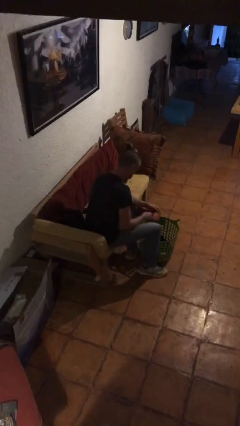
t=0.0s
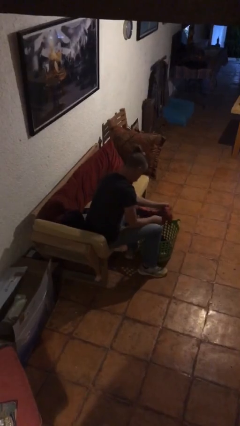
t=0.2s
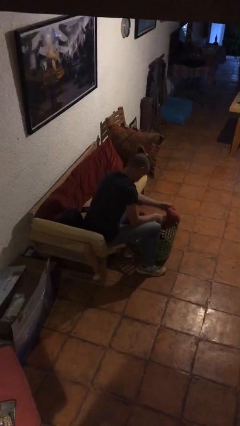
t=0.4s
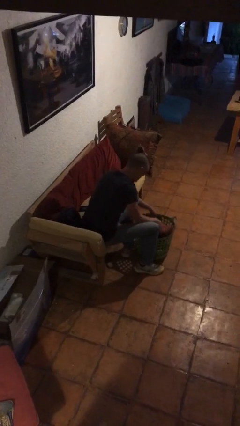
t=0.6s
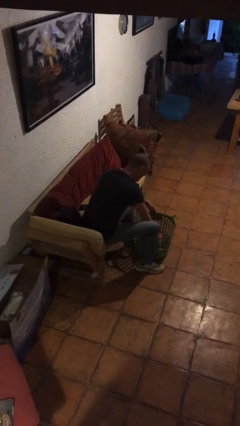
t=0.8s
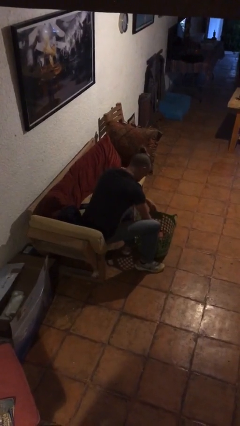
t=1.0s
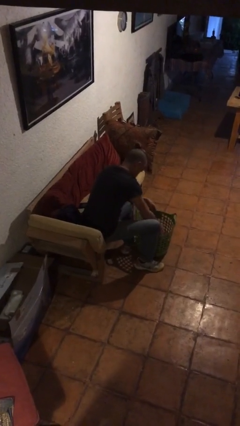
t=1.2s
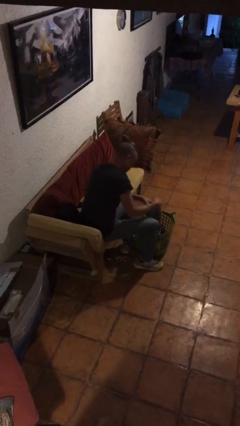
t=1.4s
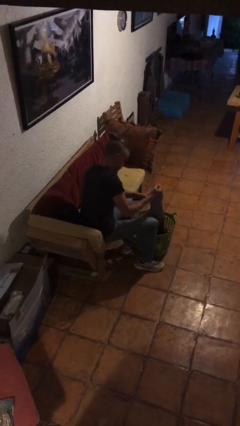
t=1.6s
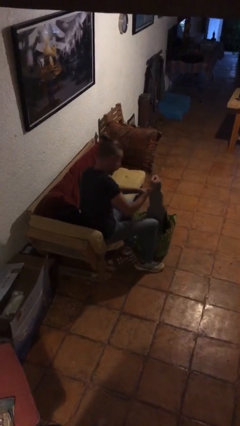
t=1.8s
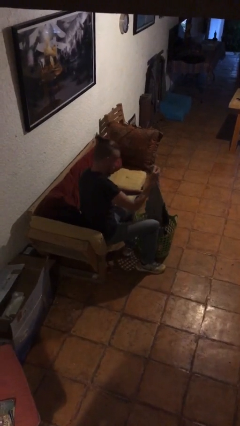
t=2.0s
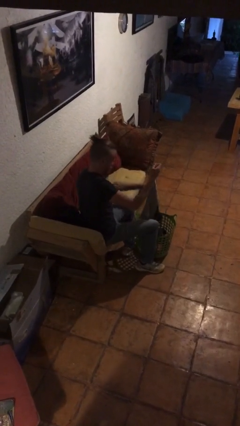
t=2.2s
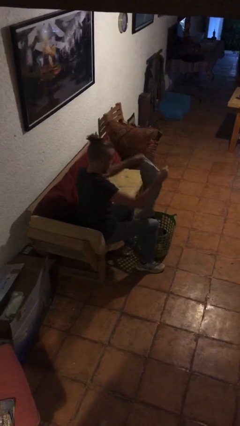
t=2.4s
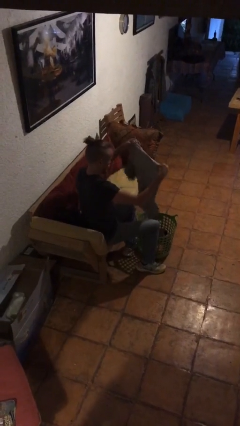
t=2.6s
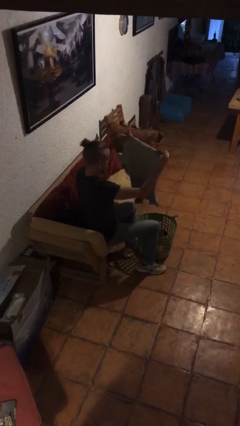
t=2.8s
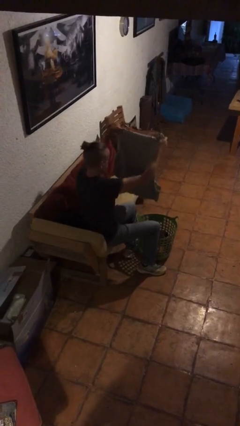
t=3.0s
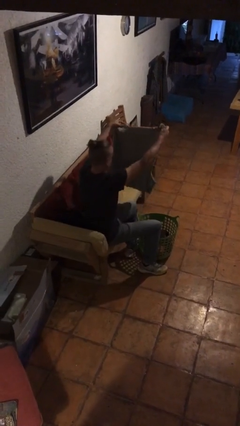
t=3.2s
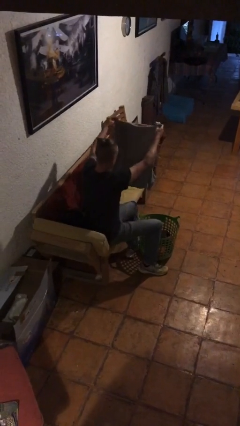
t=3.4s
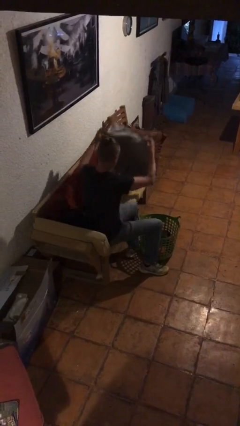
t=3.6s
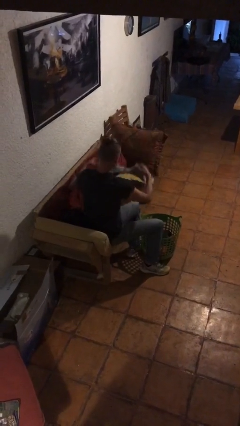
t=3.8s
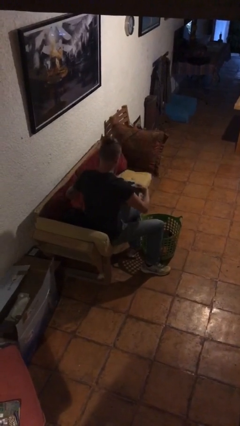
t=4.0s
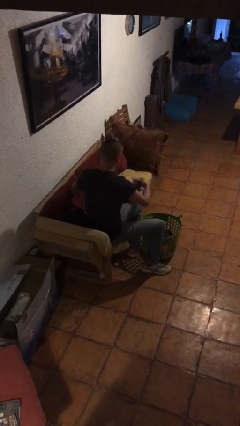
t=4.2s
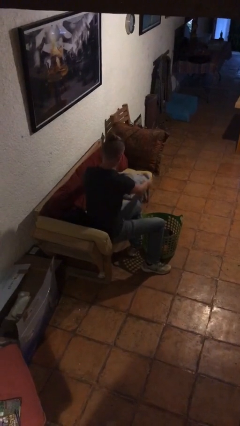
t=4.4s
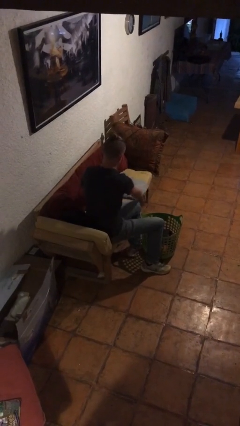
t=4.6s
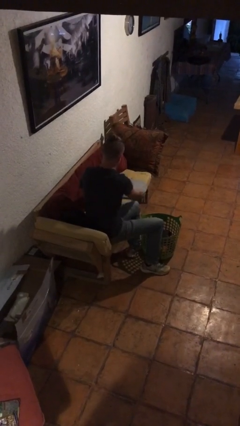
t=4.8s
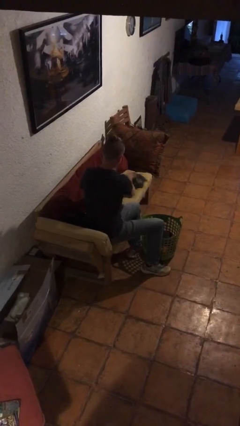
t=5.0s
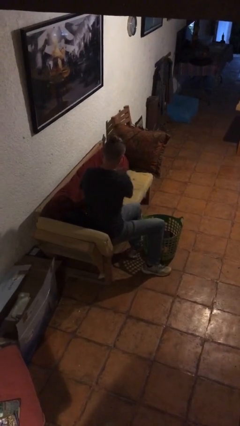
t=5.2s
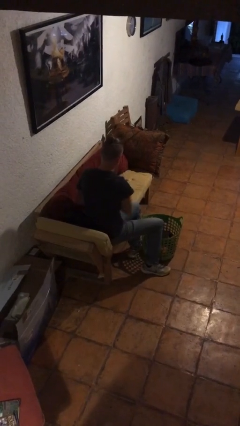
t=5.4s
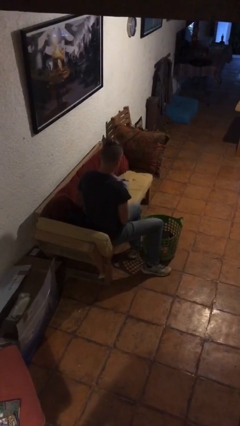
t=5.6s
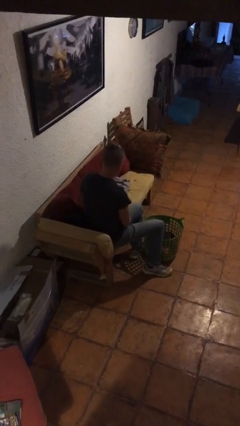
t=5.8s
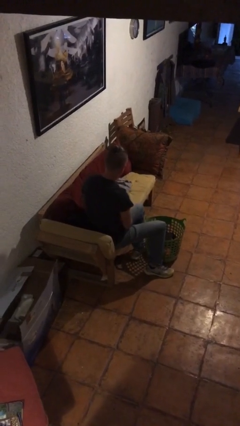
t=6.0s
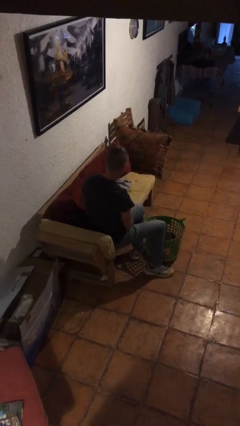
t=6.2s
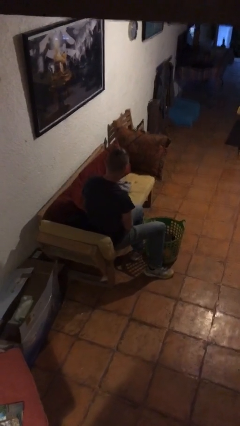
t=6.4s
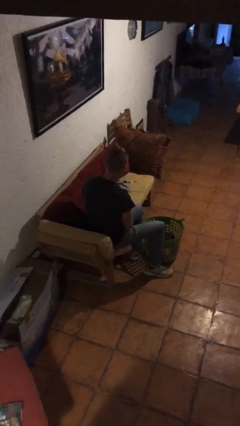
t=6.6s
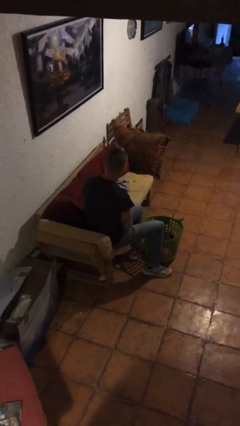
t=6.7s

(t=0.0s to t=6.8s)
person folds shirt

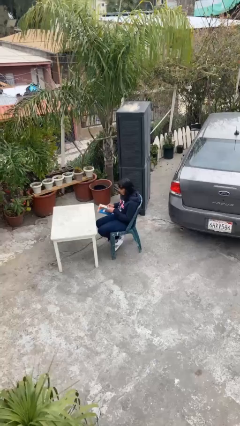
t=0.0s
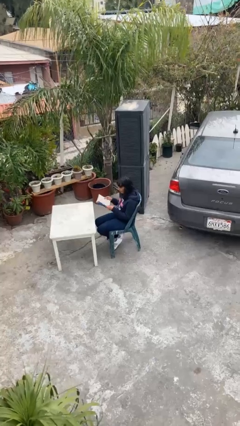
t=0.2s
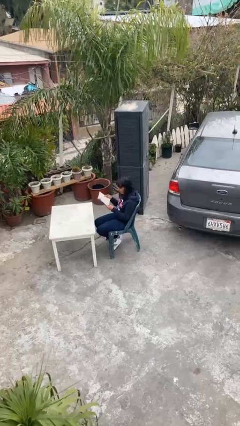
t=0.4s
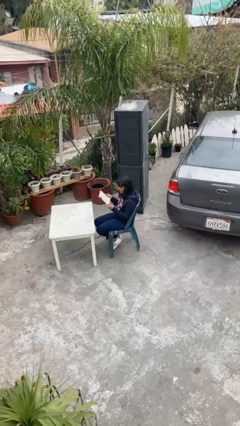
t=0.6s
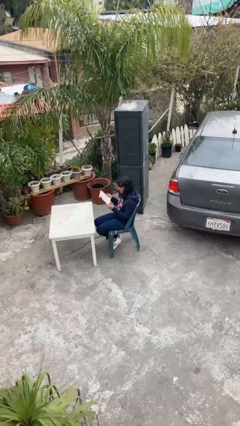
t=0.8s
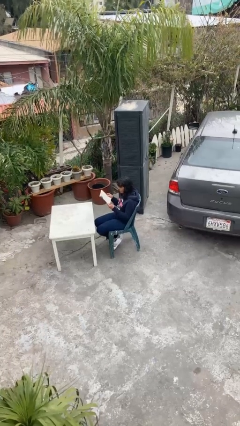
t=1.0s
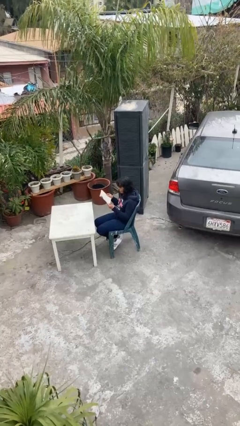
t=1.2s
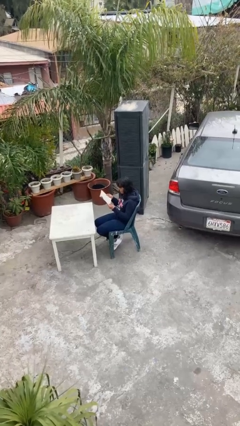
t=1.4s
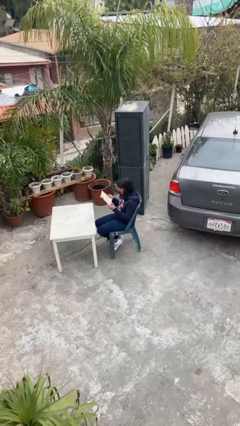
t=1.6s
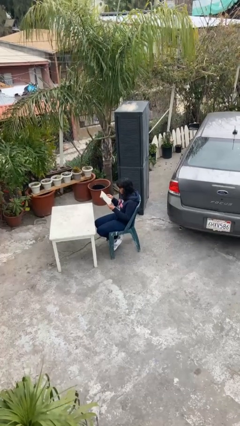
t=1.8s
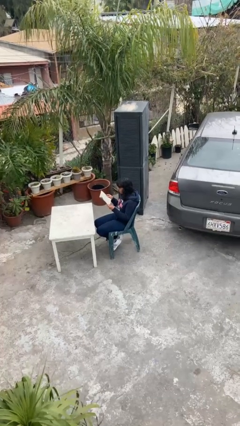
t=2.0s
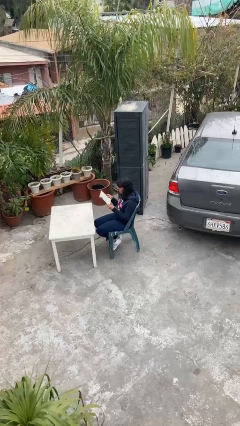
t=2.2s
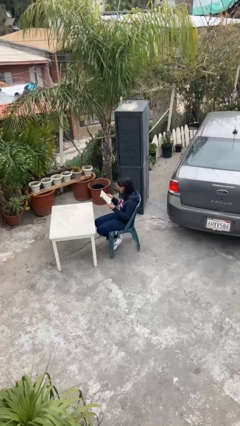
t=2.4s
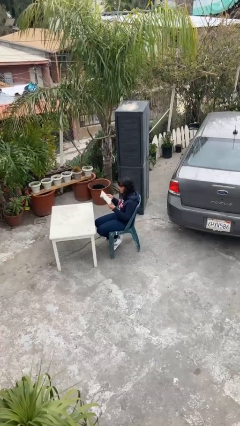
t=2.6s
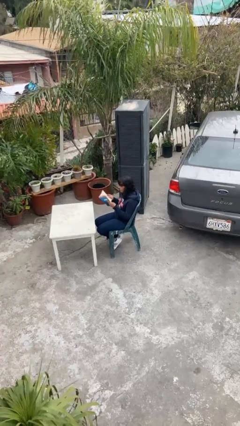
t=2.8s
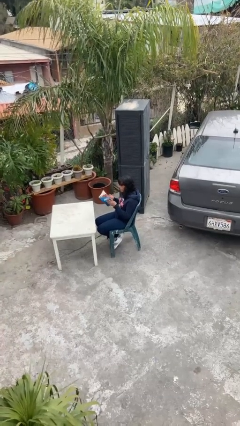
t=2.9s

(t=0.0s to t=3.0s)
person reads document

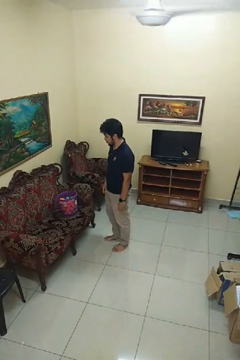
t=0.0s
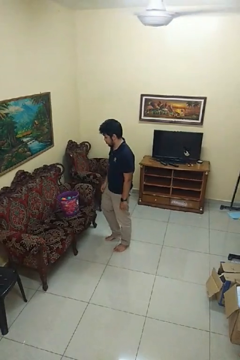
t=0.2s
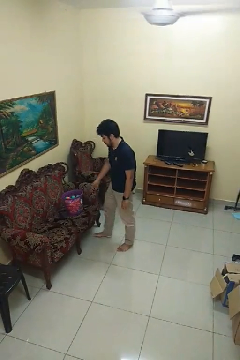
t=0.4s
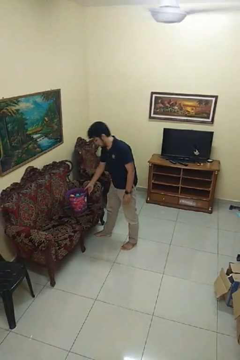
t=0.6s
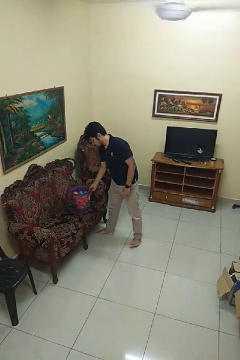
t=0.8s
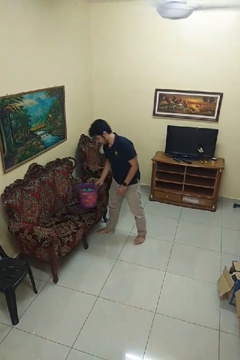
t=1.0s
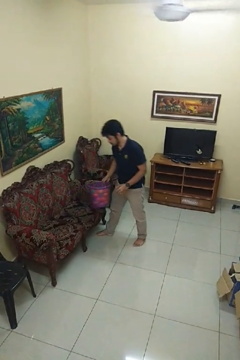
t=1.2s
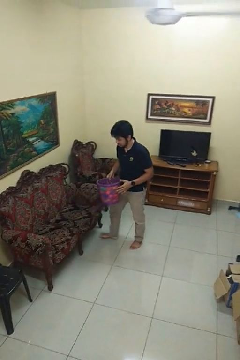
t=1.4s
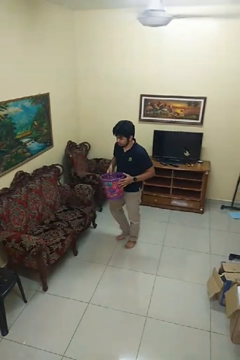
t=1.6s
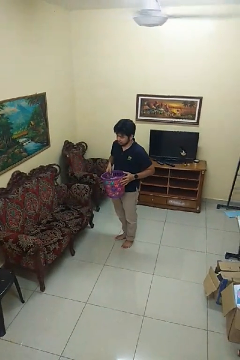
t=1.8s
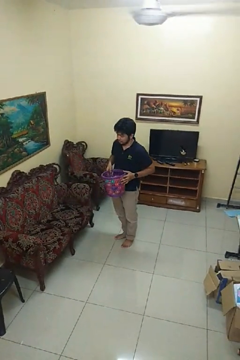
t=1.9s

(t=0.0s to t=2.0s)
person picks up object from couch

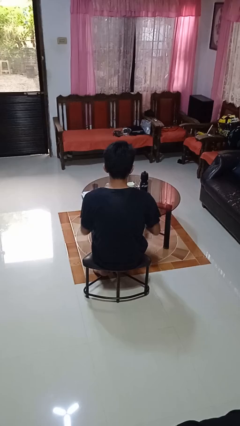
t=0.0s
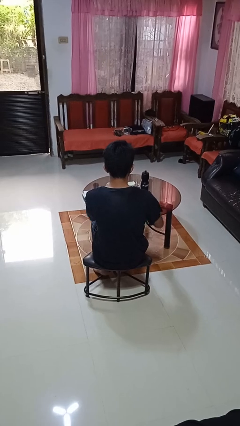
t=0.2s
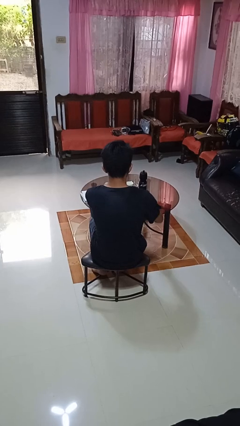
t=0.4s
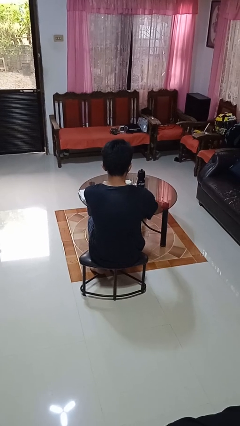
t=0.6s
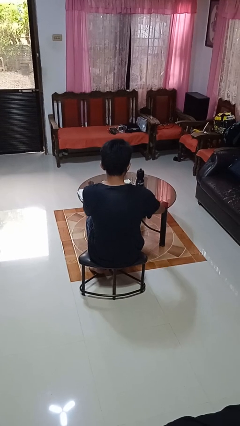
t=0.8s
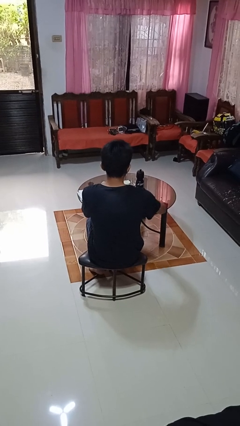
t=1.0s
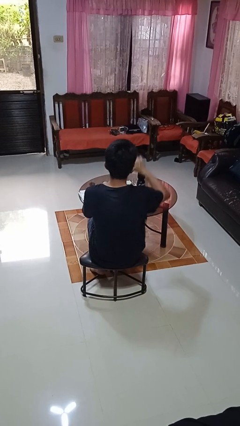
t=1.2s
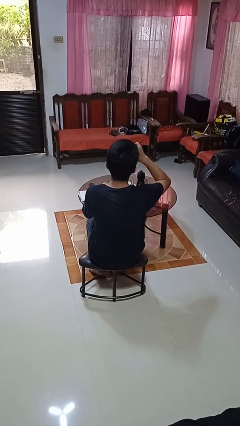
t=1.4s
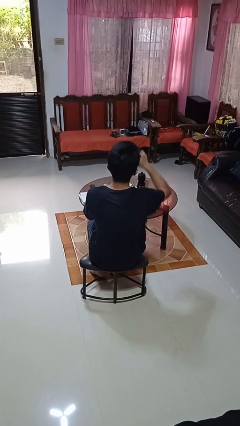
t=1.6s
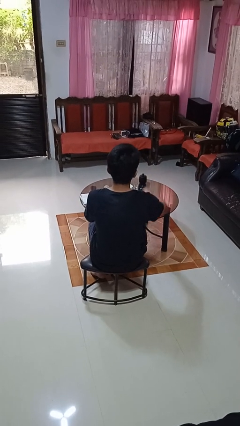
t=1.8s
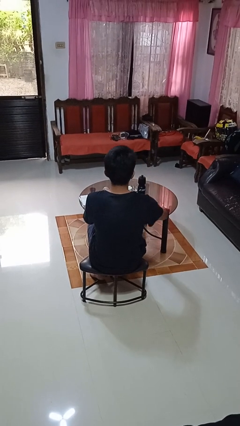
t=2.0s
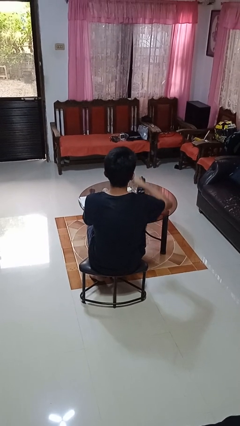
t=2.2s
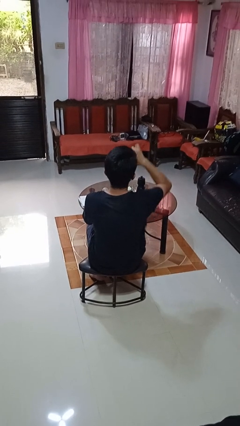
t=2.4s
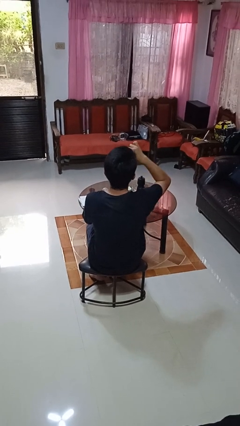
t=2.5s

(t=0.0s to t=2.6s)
person eats with utensil

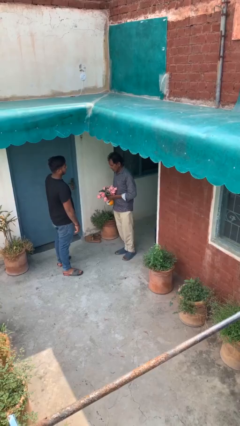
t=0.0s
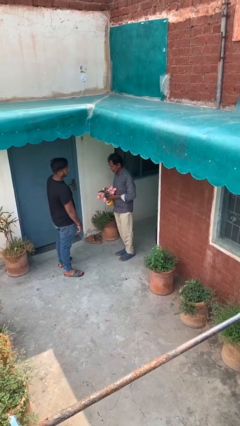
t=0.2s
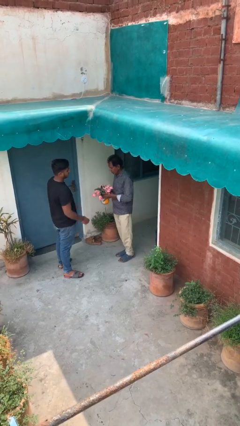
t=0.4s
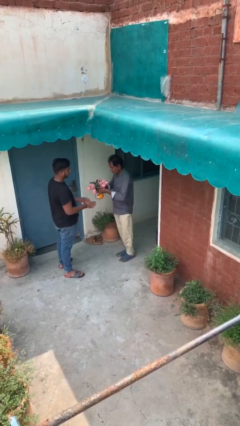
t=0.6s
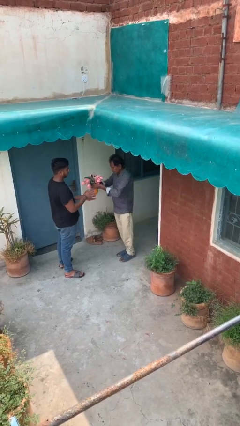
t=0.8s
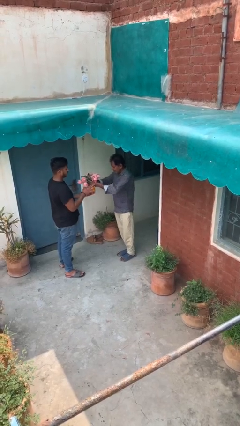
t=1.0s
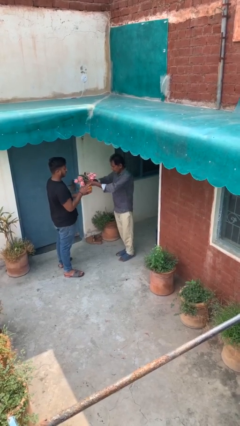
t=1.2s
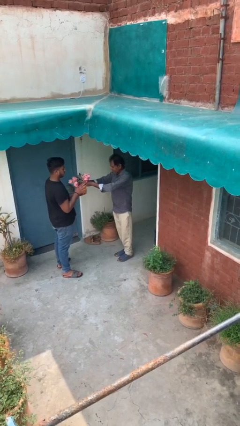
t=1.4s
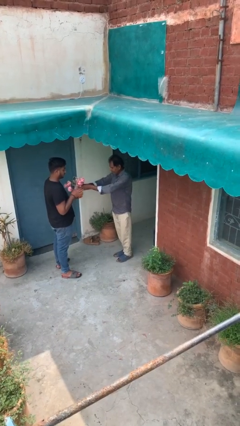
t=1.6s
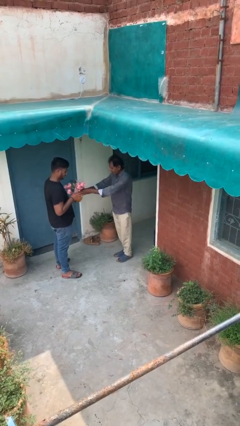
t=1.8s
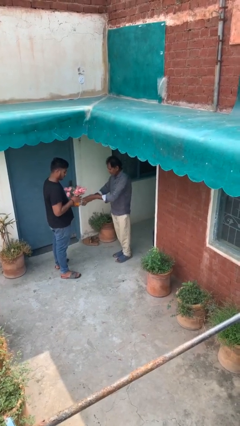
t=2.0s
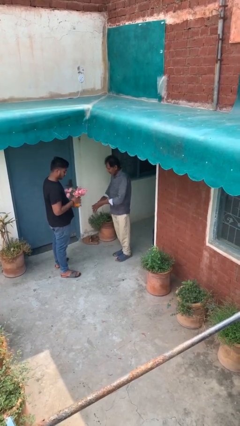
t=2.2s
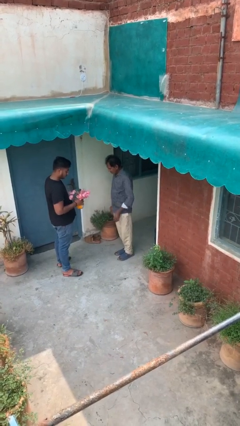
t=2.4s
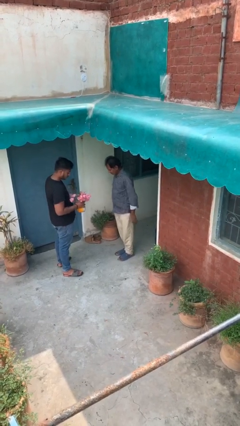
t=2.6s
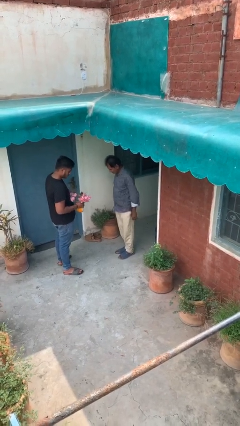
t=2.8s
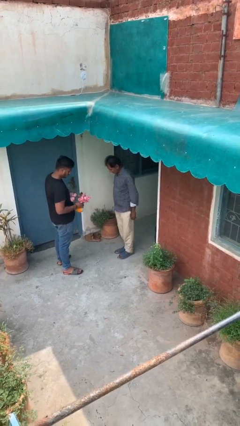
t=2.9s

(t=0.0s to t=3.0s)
person transfers object to person

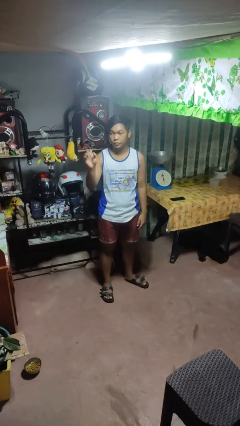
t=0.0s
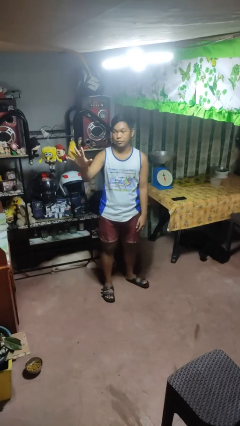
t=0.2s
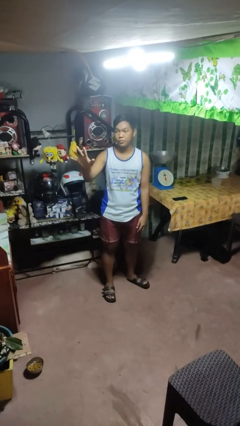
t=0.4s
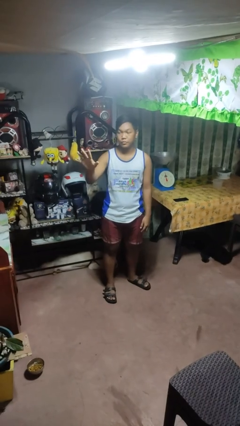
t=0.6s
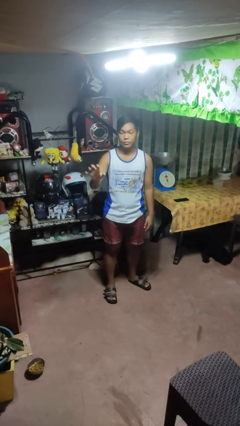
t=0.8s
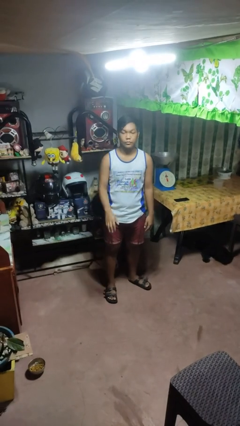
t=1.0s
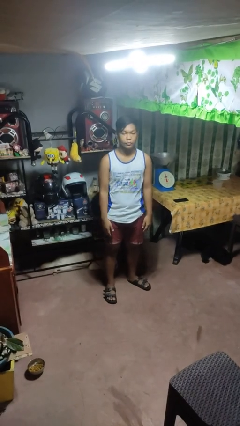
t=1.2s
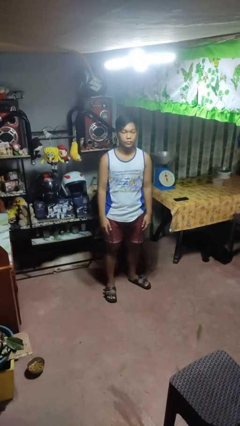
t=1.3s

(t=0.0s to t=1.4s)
person gestures number five
